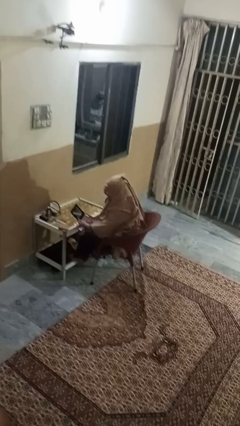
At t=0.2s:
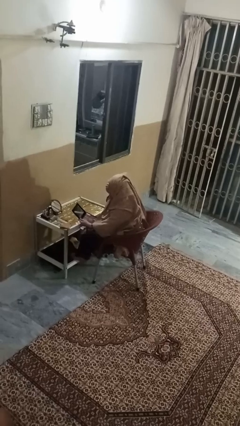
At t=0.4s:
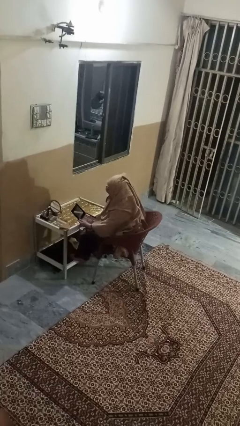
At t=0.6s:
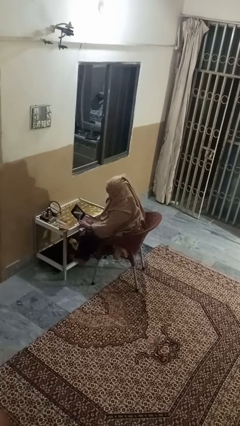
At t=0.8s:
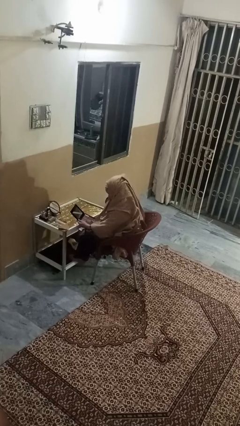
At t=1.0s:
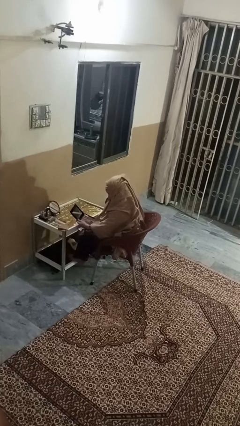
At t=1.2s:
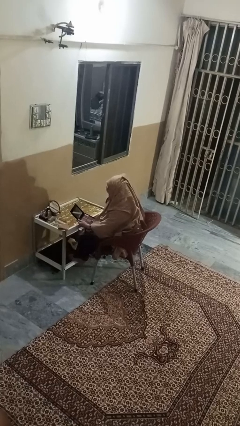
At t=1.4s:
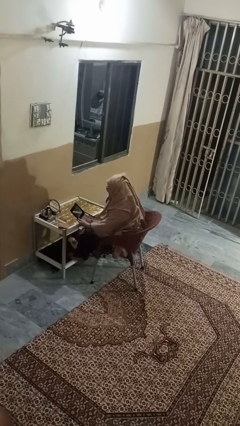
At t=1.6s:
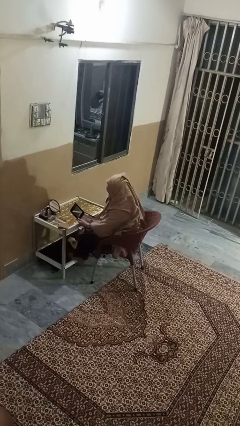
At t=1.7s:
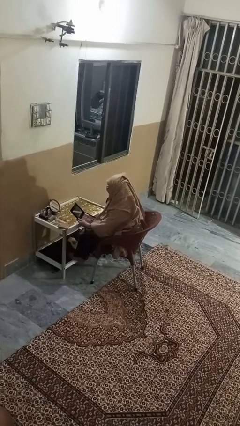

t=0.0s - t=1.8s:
person applies eye makeup

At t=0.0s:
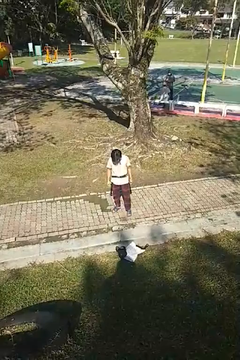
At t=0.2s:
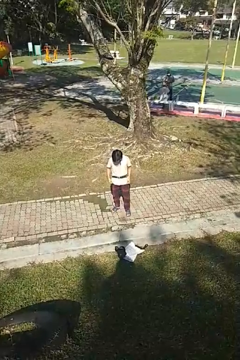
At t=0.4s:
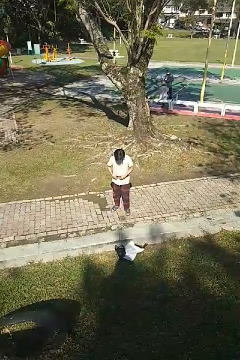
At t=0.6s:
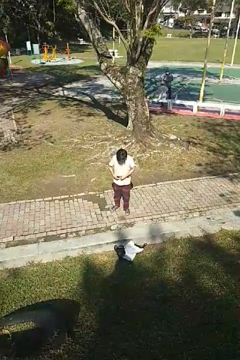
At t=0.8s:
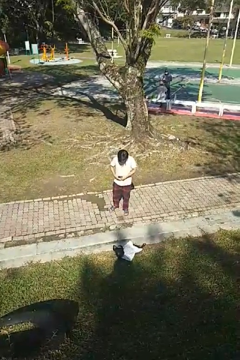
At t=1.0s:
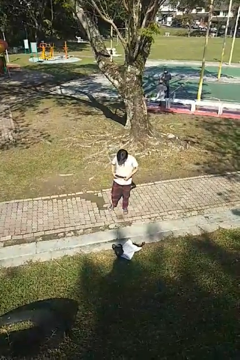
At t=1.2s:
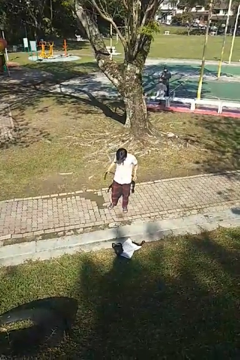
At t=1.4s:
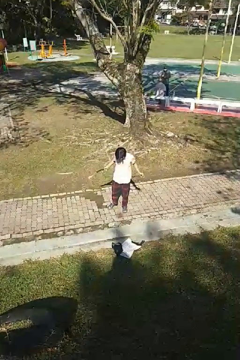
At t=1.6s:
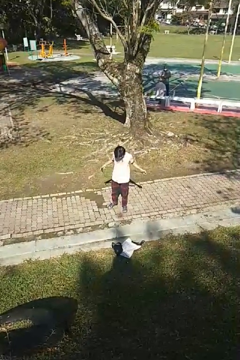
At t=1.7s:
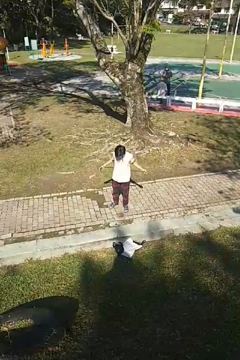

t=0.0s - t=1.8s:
person takes off belt

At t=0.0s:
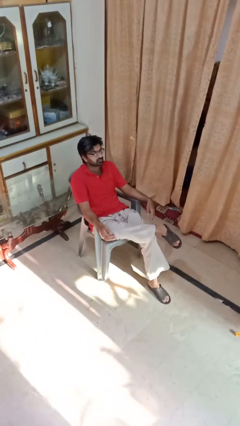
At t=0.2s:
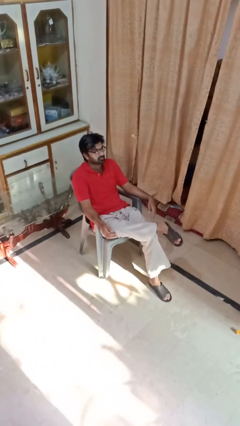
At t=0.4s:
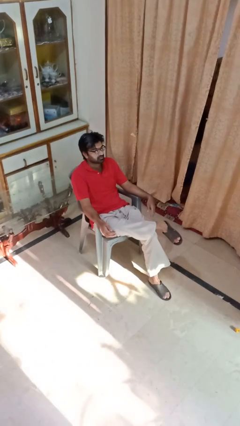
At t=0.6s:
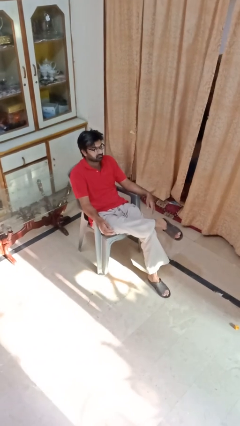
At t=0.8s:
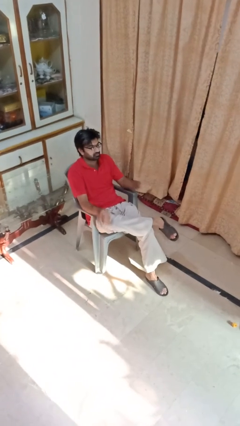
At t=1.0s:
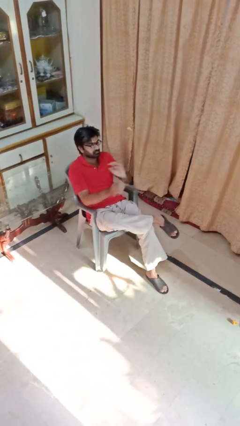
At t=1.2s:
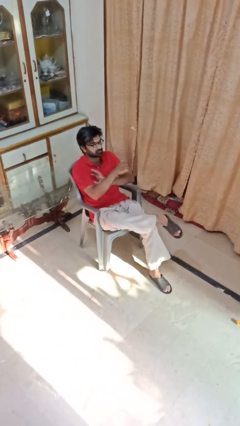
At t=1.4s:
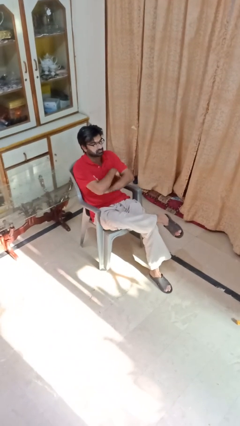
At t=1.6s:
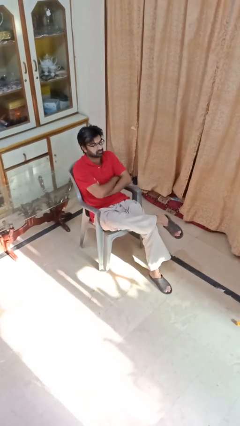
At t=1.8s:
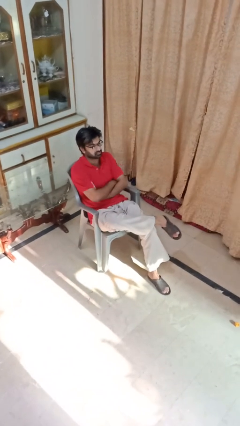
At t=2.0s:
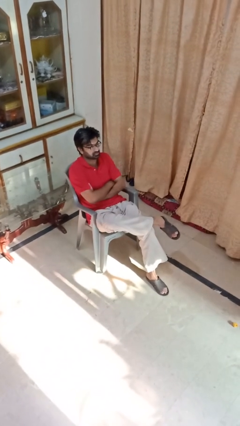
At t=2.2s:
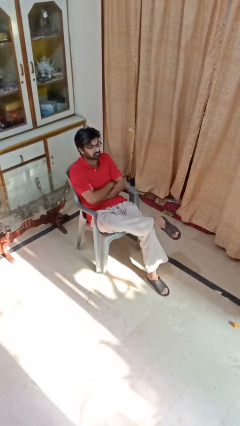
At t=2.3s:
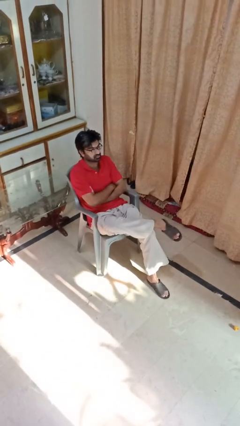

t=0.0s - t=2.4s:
person crosses arms

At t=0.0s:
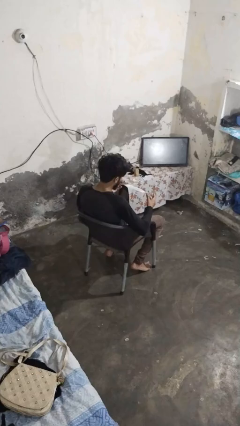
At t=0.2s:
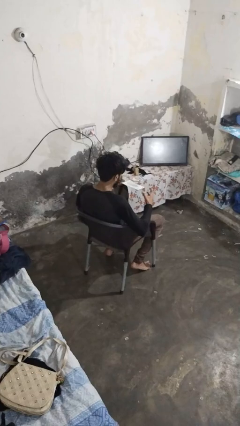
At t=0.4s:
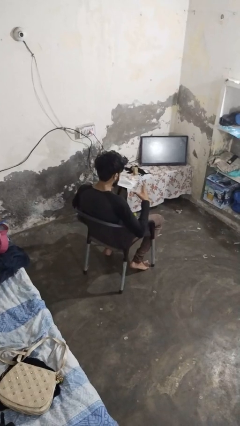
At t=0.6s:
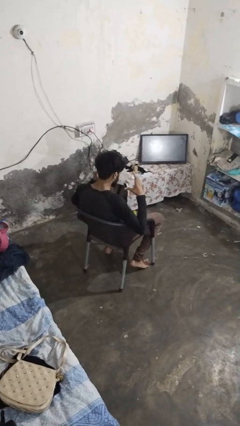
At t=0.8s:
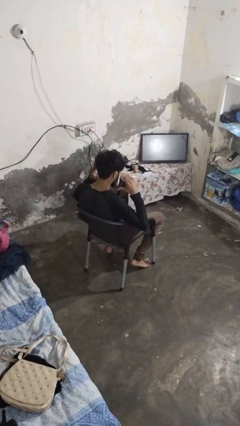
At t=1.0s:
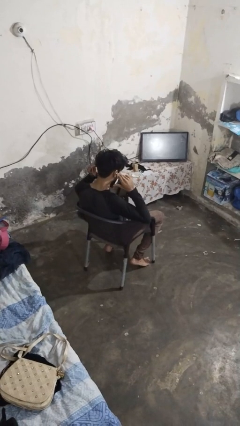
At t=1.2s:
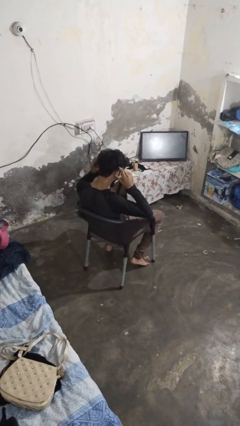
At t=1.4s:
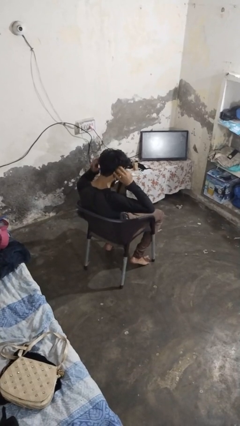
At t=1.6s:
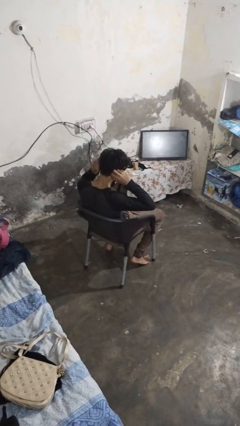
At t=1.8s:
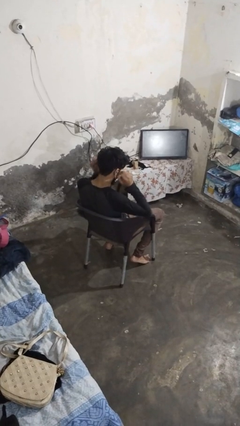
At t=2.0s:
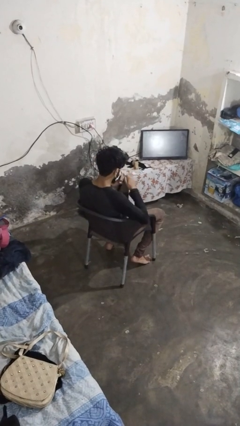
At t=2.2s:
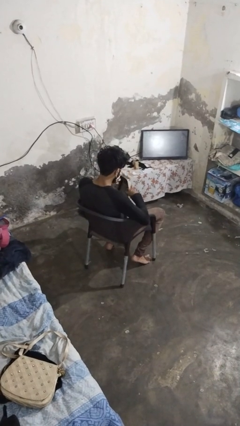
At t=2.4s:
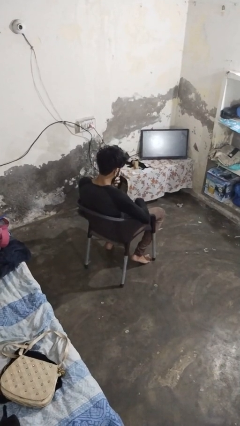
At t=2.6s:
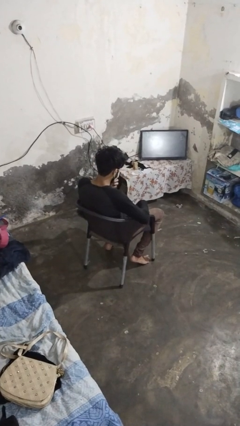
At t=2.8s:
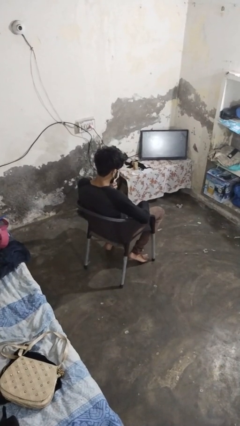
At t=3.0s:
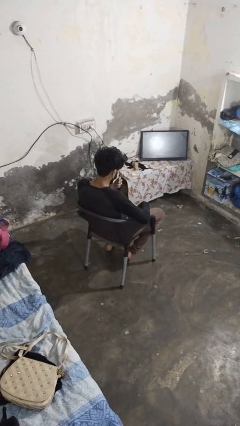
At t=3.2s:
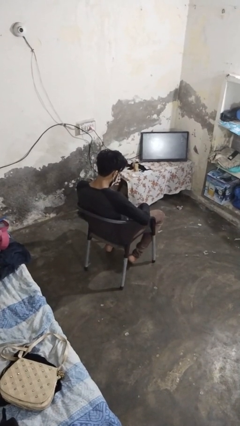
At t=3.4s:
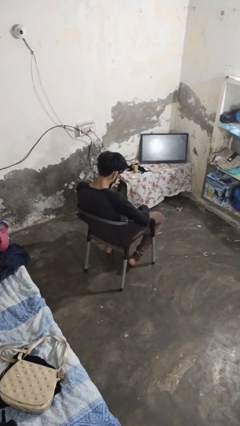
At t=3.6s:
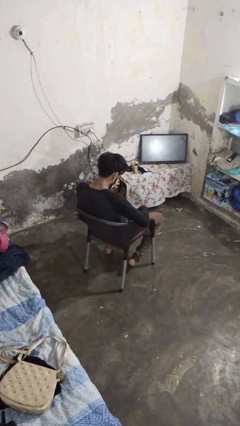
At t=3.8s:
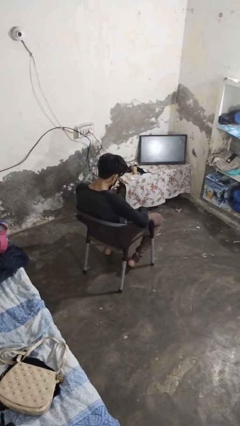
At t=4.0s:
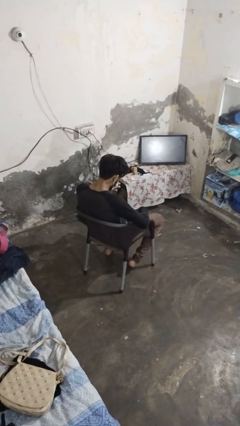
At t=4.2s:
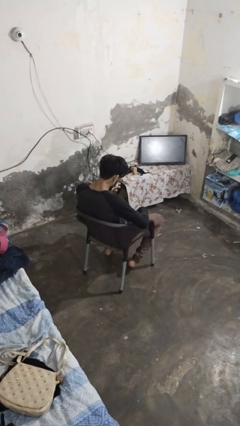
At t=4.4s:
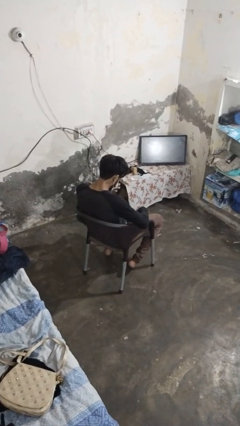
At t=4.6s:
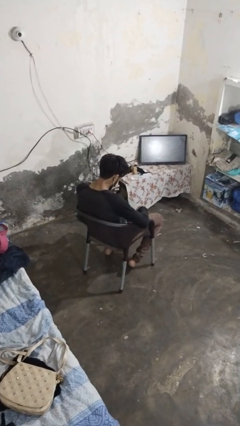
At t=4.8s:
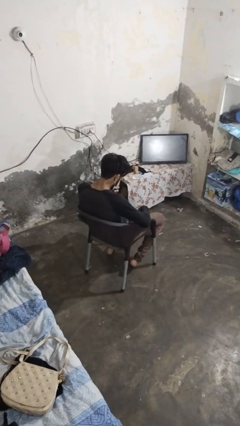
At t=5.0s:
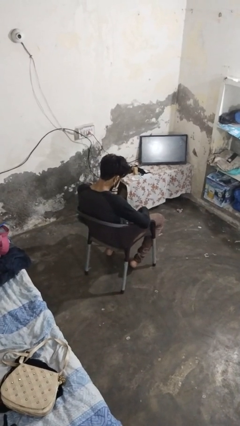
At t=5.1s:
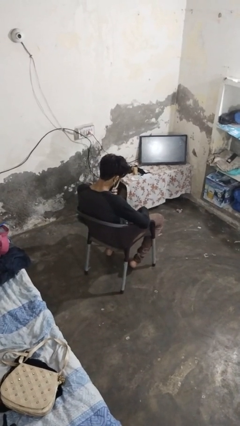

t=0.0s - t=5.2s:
person puts on facemask

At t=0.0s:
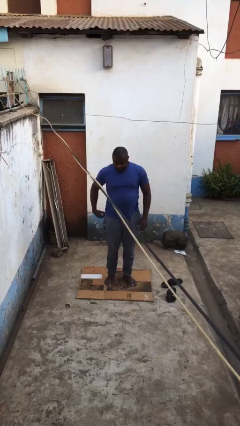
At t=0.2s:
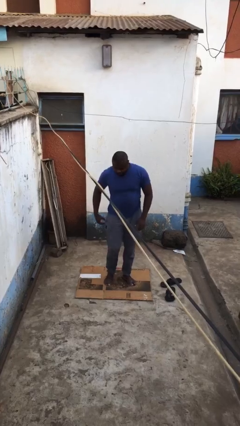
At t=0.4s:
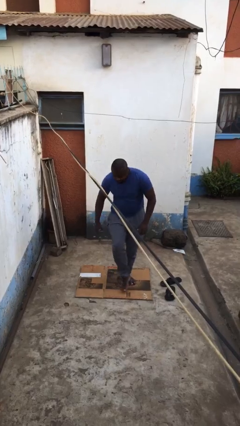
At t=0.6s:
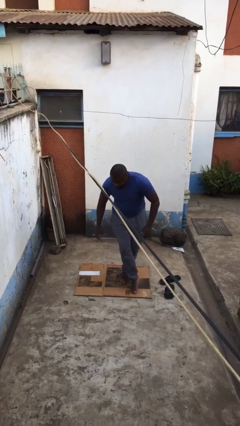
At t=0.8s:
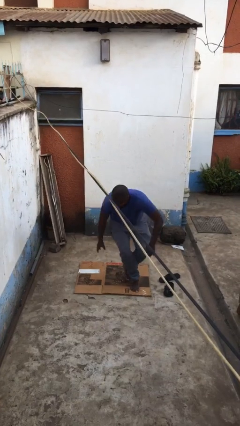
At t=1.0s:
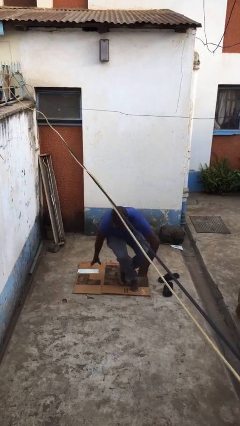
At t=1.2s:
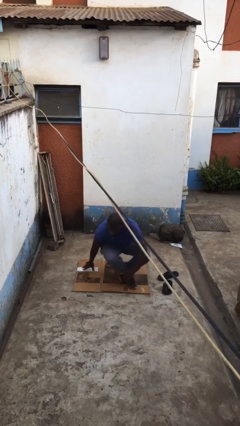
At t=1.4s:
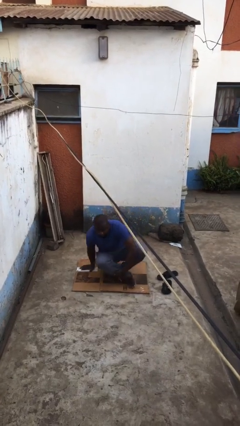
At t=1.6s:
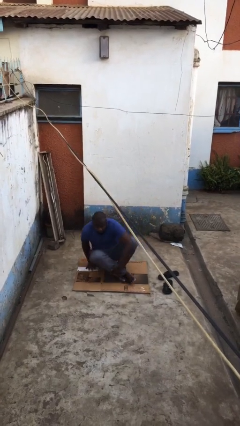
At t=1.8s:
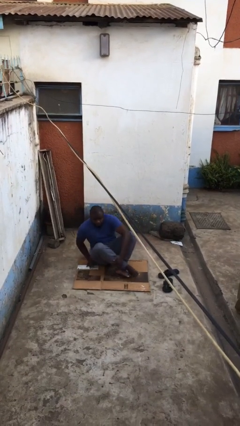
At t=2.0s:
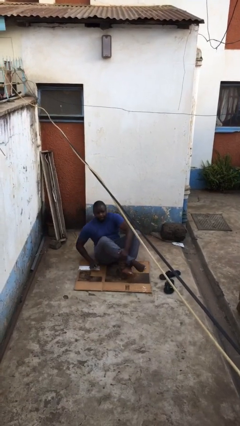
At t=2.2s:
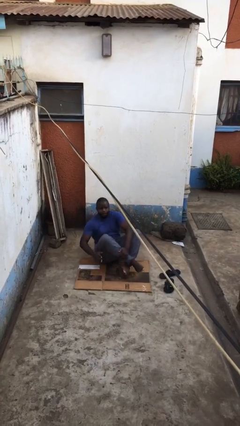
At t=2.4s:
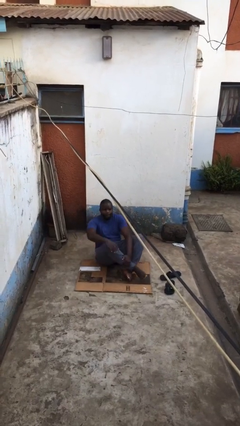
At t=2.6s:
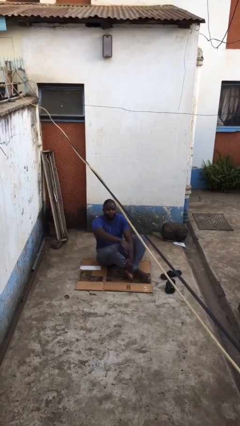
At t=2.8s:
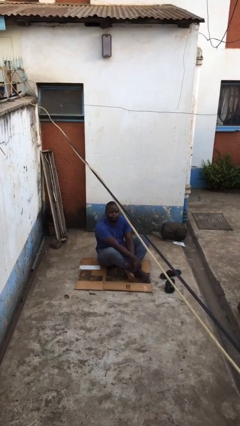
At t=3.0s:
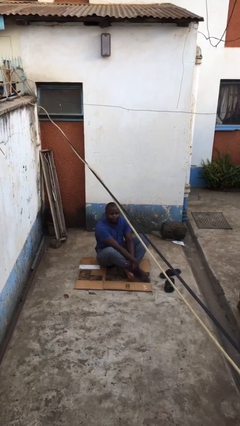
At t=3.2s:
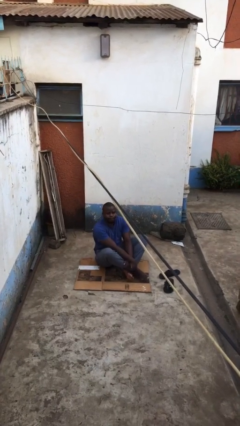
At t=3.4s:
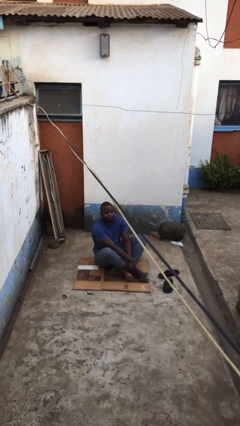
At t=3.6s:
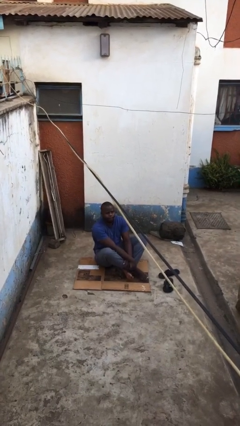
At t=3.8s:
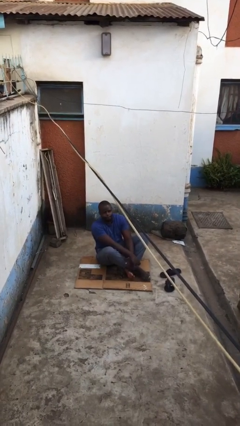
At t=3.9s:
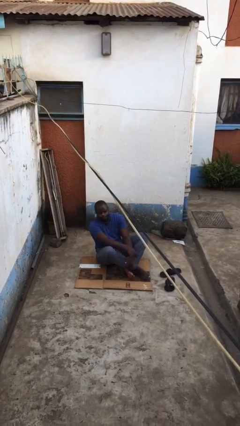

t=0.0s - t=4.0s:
person sits crisscross

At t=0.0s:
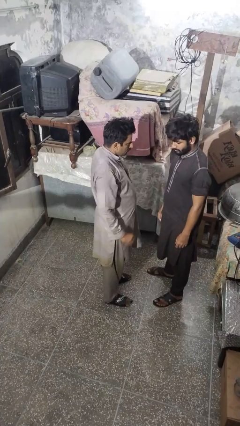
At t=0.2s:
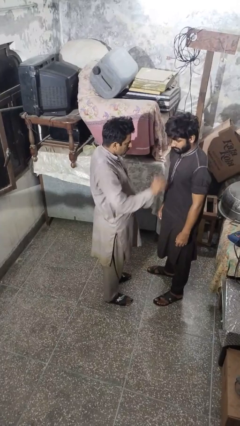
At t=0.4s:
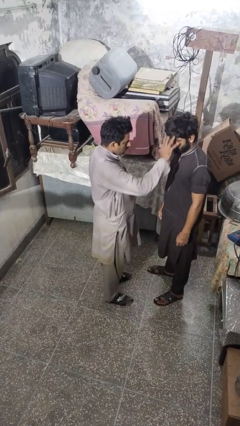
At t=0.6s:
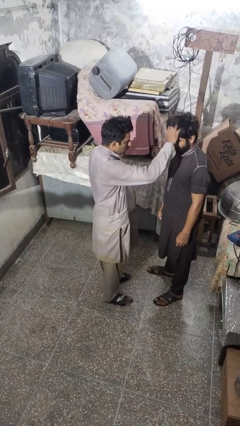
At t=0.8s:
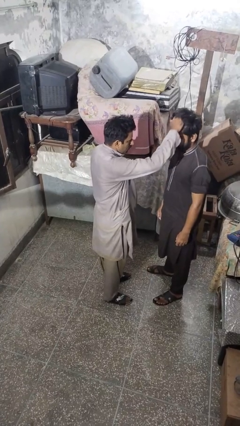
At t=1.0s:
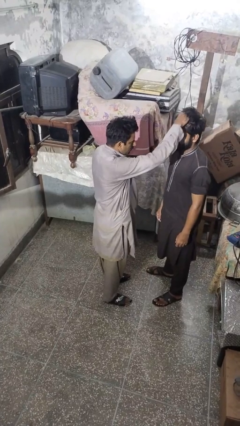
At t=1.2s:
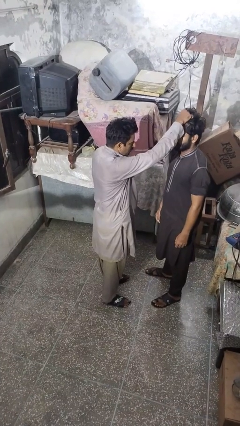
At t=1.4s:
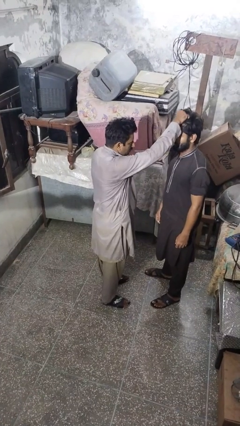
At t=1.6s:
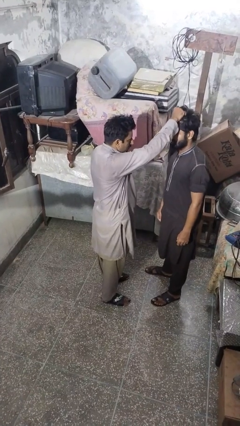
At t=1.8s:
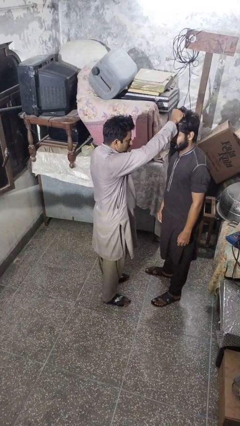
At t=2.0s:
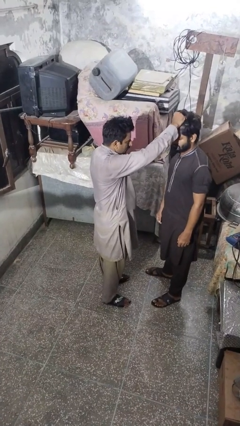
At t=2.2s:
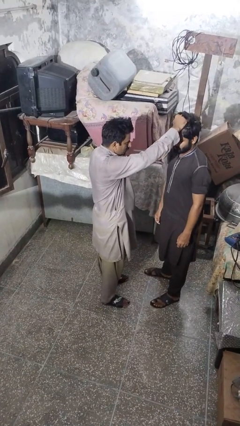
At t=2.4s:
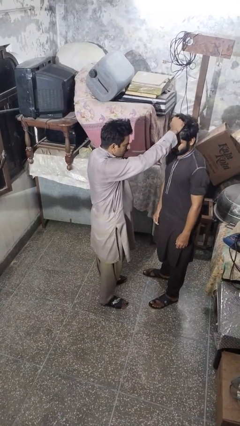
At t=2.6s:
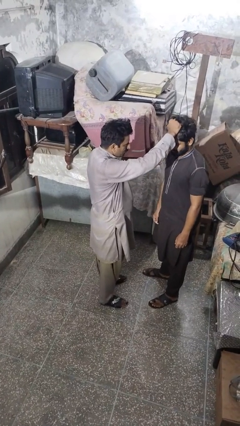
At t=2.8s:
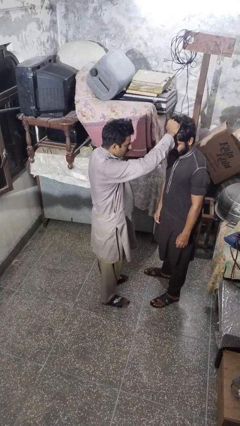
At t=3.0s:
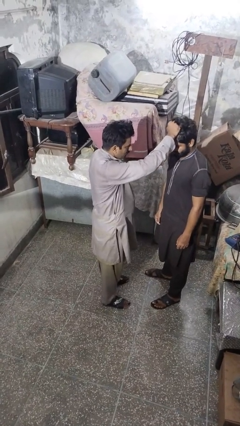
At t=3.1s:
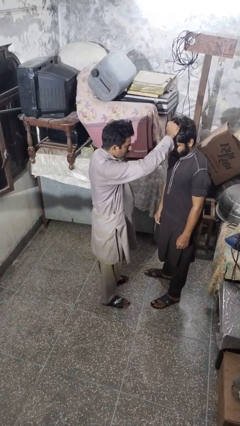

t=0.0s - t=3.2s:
person grabs person by hair
